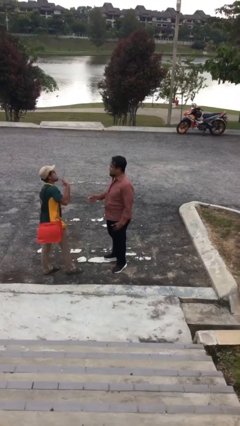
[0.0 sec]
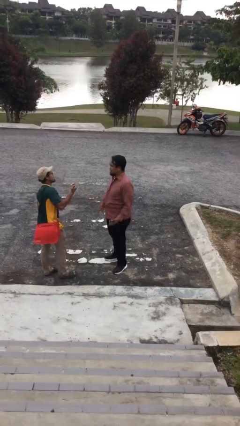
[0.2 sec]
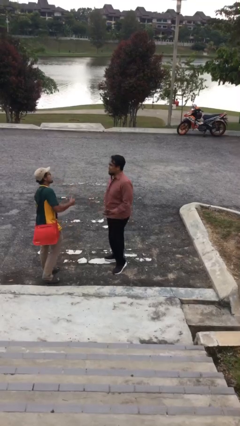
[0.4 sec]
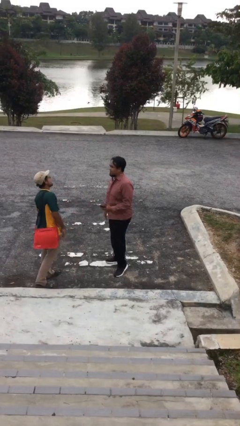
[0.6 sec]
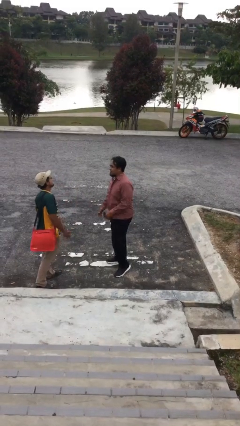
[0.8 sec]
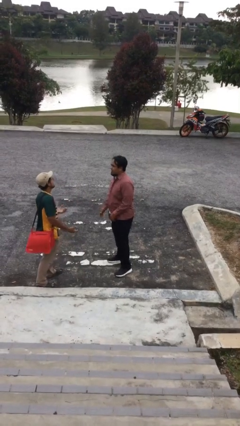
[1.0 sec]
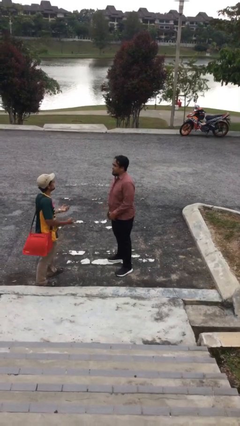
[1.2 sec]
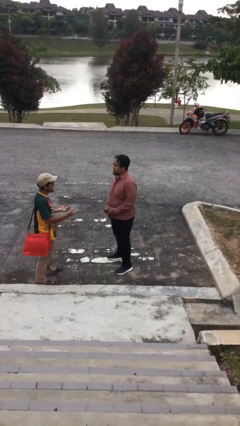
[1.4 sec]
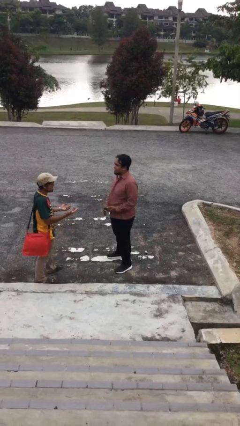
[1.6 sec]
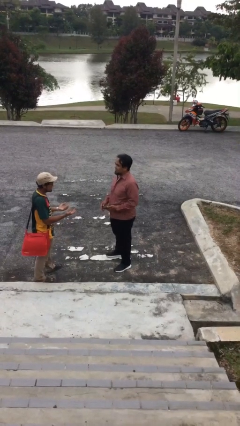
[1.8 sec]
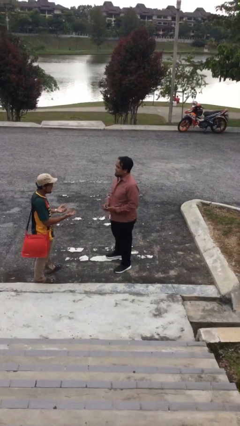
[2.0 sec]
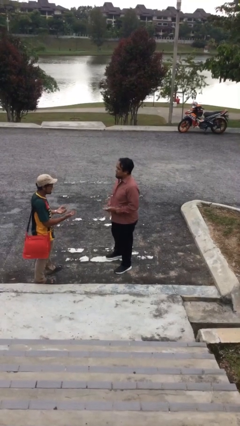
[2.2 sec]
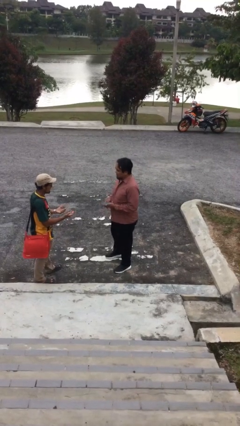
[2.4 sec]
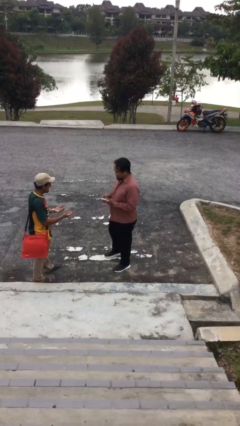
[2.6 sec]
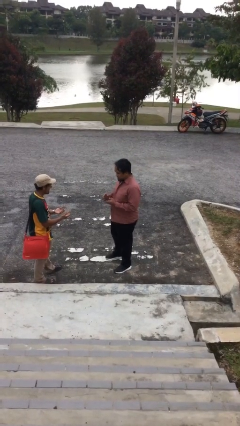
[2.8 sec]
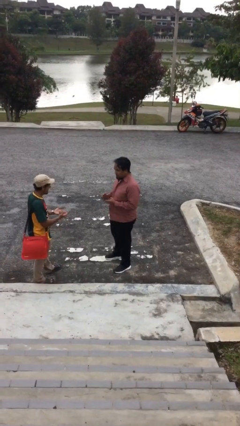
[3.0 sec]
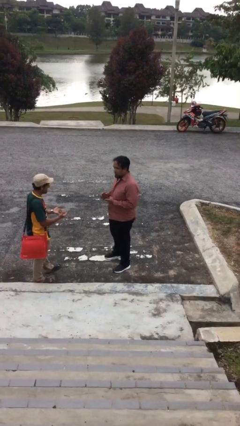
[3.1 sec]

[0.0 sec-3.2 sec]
person talks to person

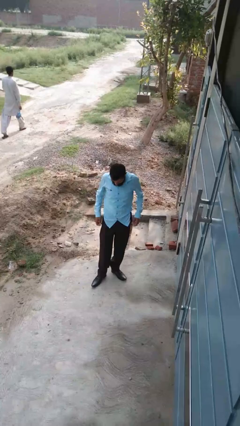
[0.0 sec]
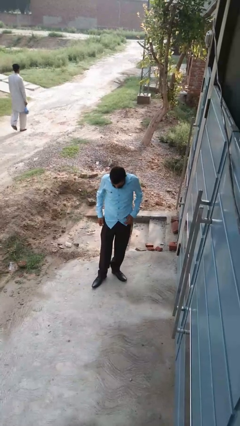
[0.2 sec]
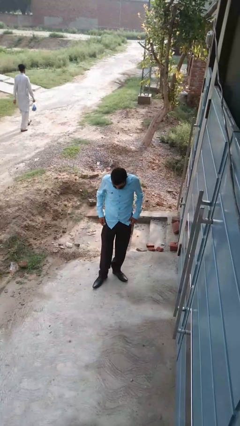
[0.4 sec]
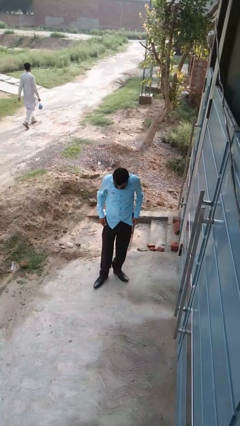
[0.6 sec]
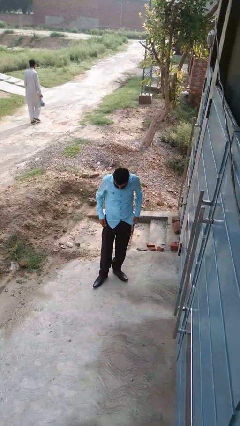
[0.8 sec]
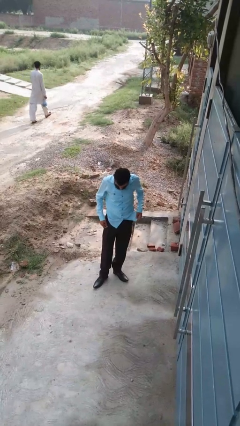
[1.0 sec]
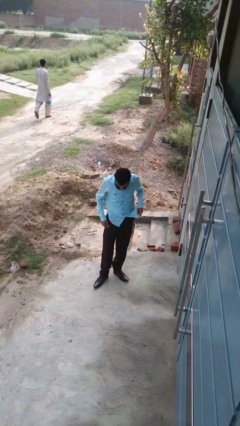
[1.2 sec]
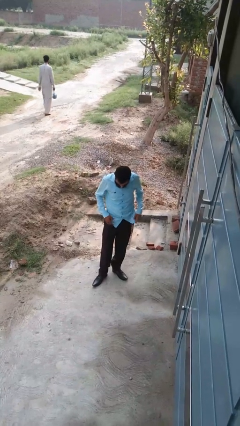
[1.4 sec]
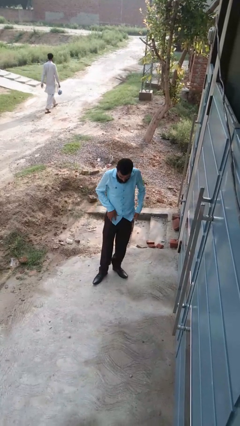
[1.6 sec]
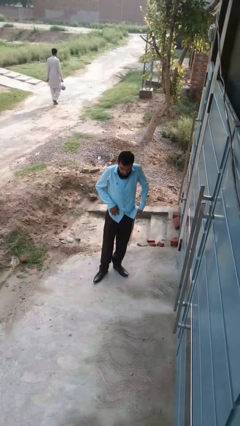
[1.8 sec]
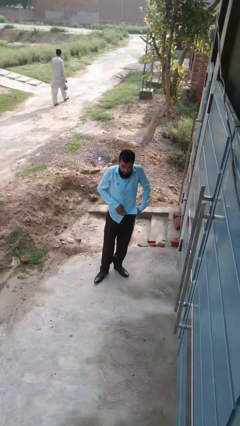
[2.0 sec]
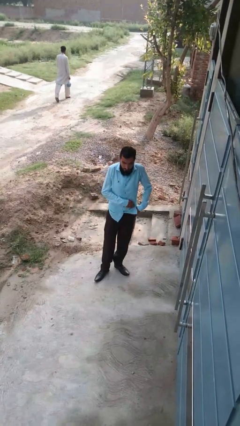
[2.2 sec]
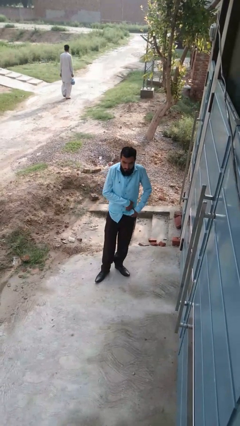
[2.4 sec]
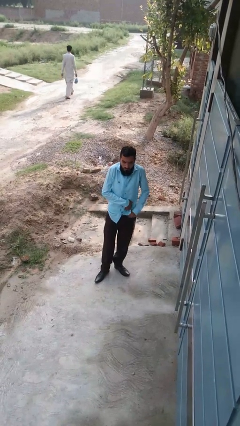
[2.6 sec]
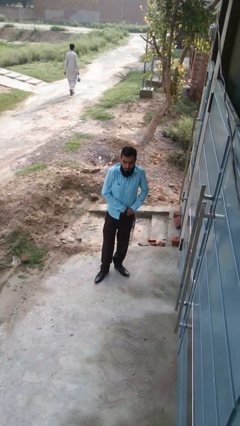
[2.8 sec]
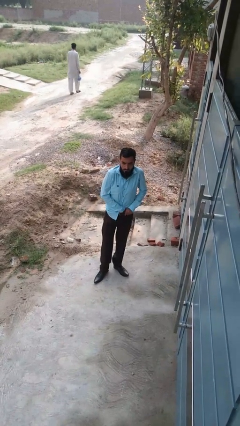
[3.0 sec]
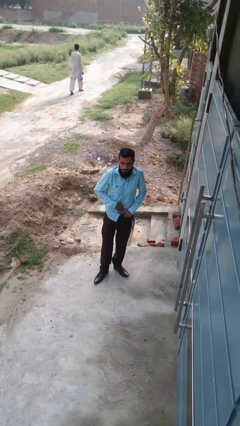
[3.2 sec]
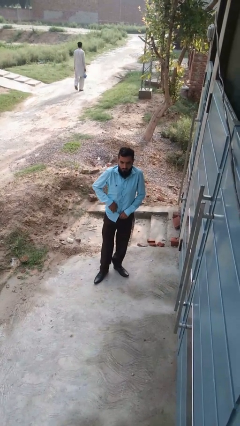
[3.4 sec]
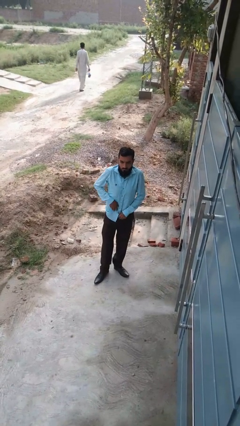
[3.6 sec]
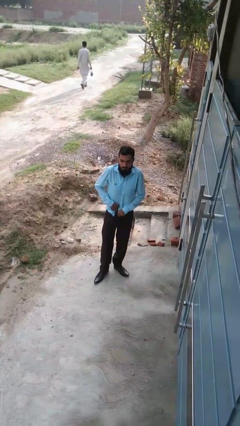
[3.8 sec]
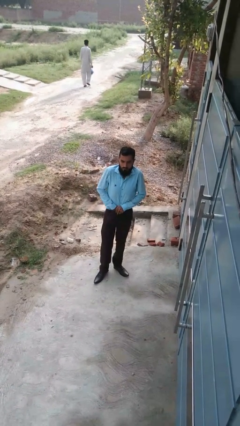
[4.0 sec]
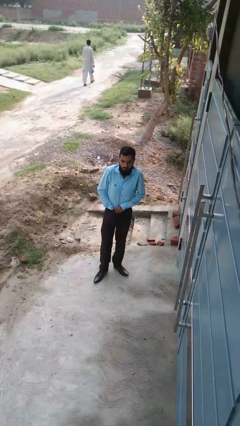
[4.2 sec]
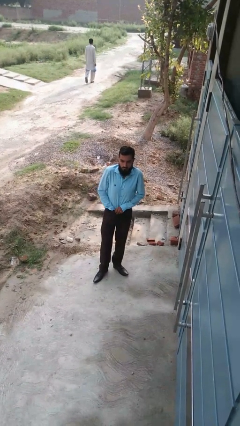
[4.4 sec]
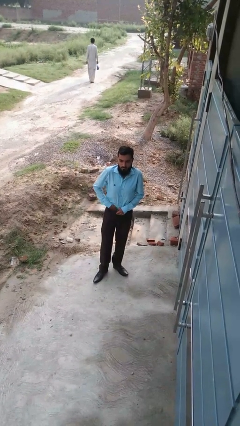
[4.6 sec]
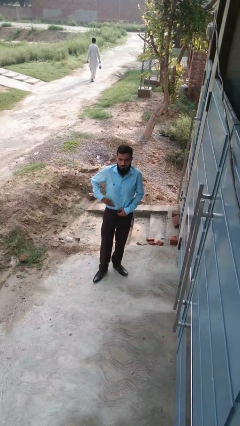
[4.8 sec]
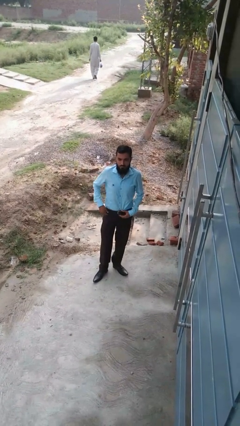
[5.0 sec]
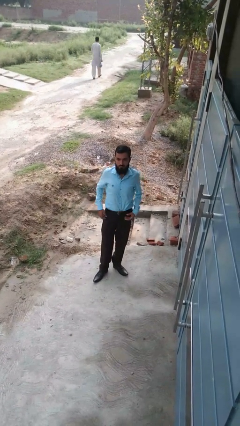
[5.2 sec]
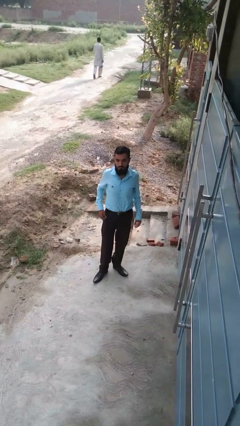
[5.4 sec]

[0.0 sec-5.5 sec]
person tucks in shirt

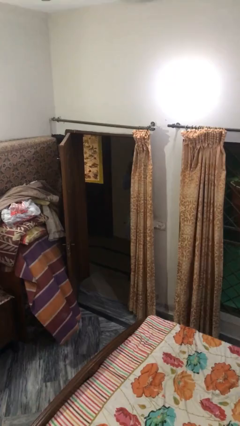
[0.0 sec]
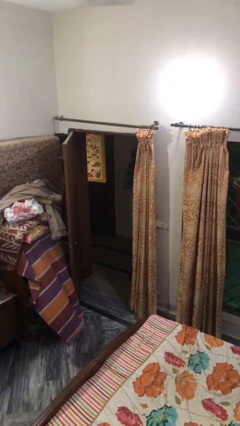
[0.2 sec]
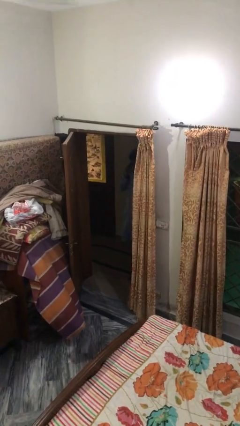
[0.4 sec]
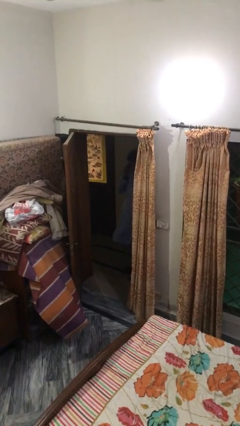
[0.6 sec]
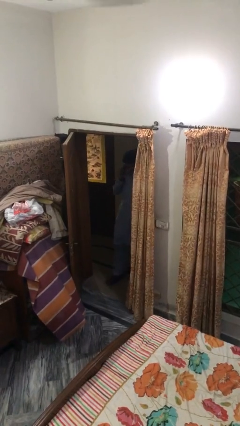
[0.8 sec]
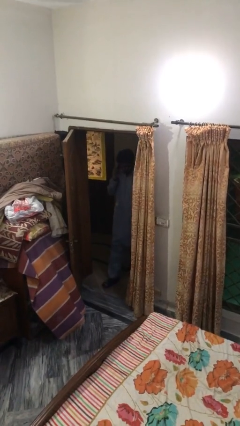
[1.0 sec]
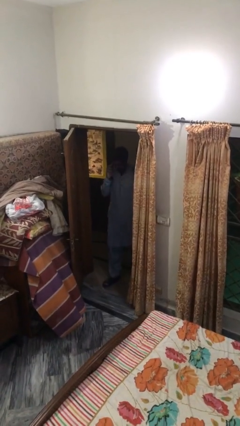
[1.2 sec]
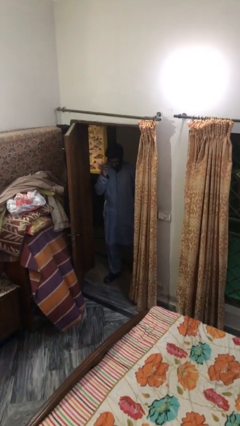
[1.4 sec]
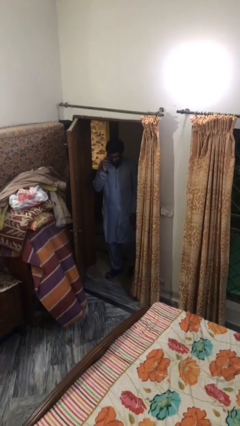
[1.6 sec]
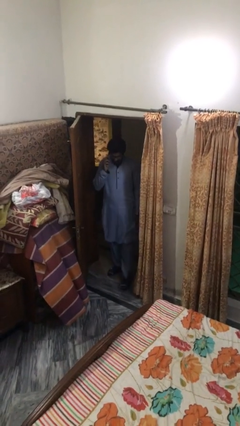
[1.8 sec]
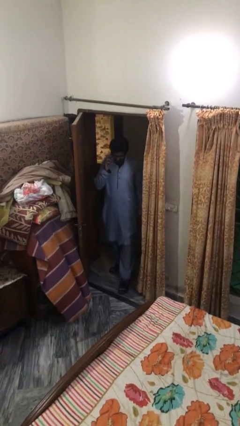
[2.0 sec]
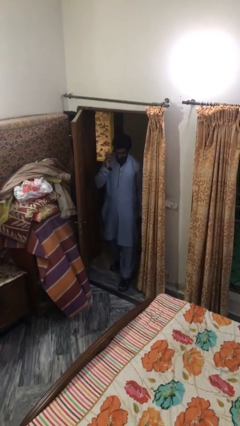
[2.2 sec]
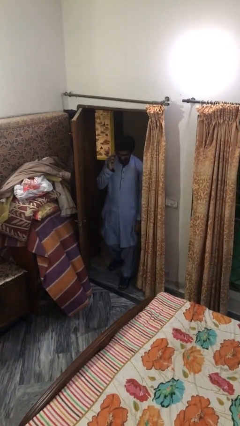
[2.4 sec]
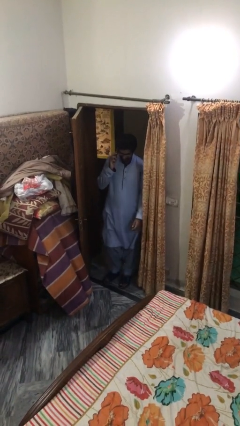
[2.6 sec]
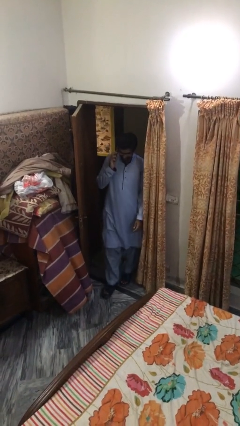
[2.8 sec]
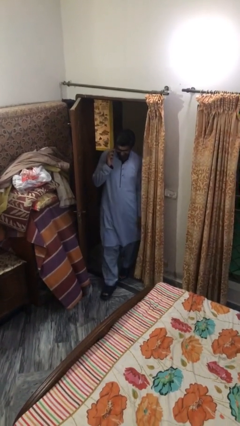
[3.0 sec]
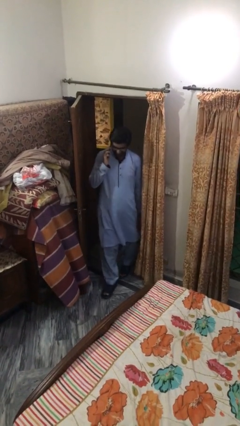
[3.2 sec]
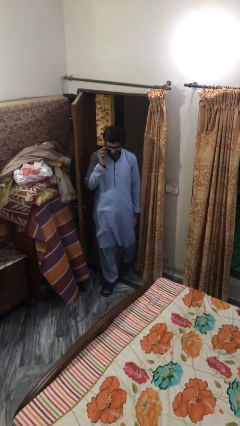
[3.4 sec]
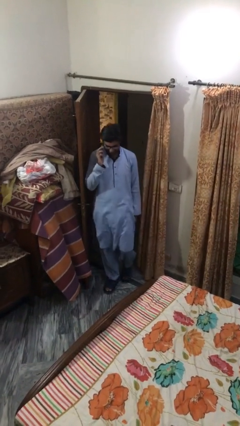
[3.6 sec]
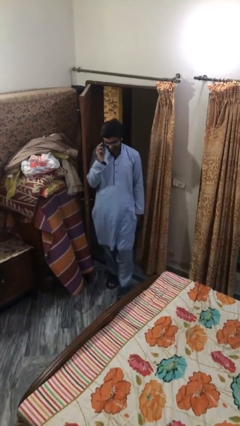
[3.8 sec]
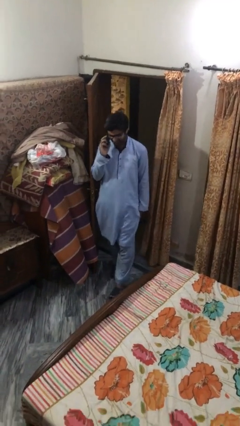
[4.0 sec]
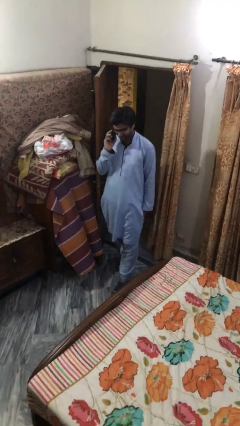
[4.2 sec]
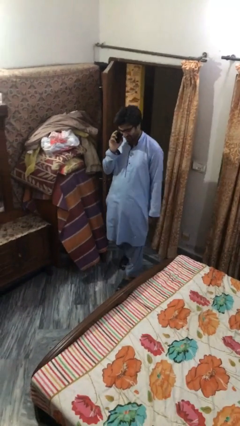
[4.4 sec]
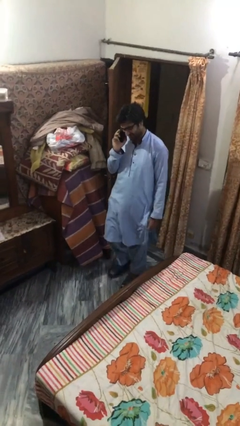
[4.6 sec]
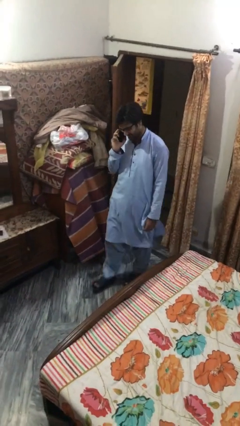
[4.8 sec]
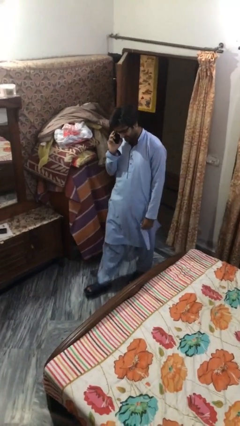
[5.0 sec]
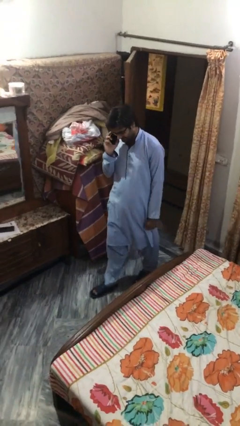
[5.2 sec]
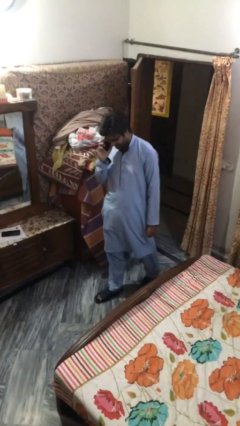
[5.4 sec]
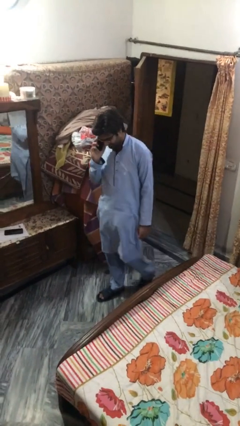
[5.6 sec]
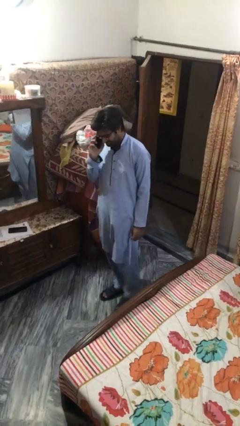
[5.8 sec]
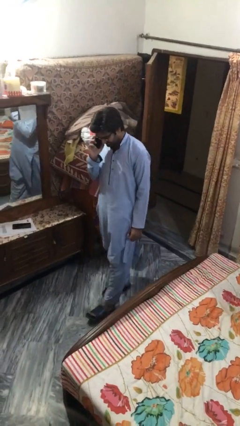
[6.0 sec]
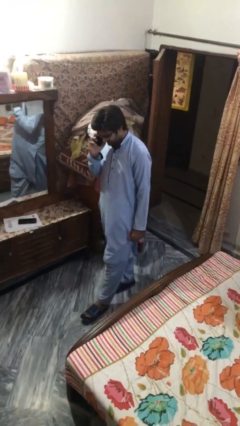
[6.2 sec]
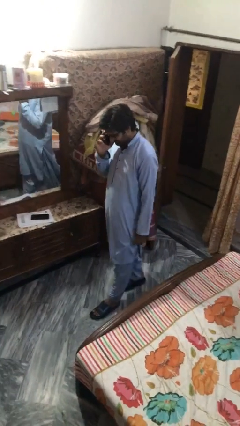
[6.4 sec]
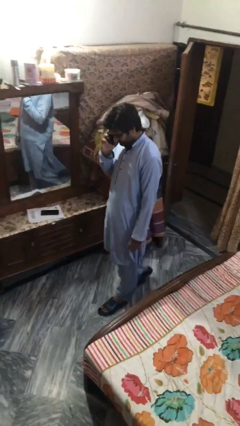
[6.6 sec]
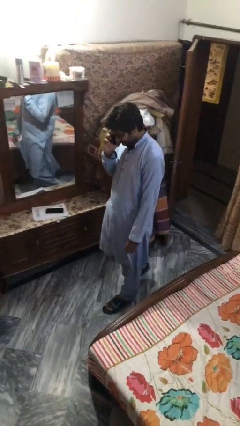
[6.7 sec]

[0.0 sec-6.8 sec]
person enters scene through structure

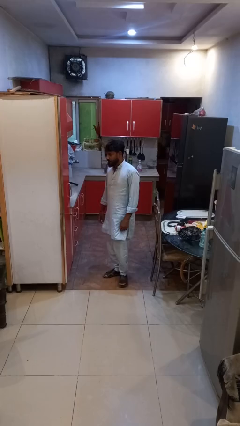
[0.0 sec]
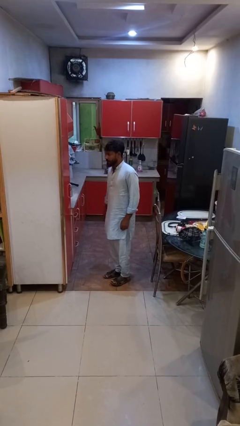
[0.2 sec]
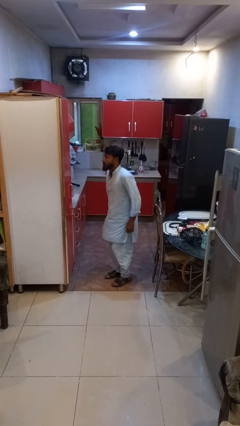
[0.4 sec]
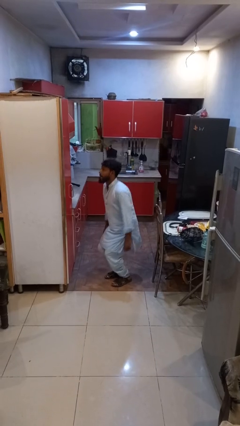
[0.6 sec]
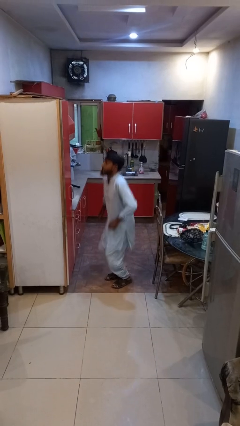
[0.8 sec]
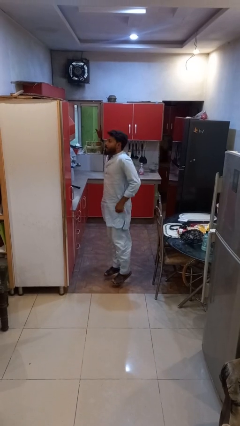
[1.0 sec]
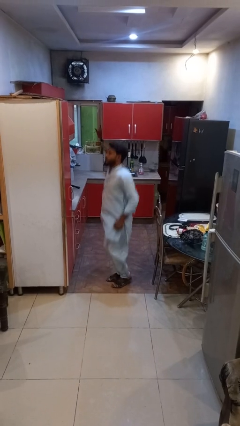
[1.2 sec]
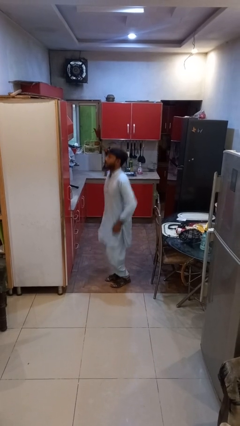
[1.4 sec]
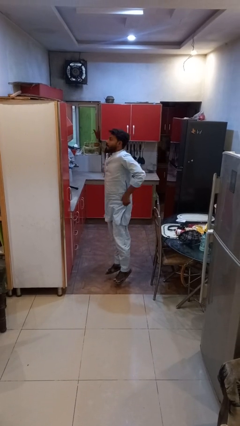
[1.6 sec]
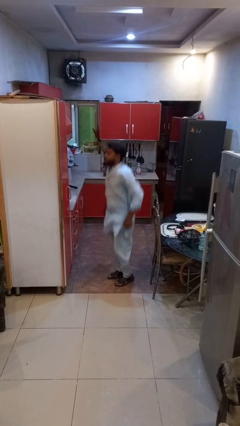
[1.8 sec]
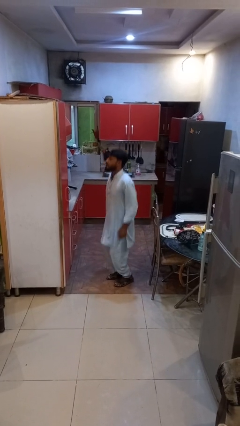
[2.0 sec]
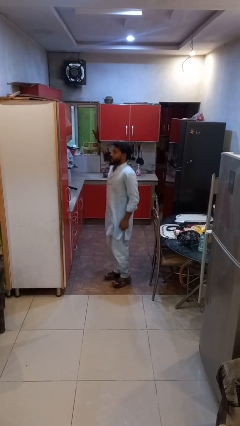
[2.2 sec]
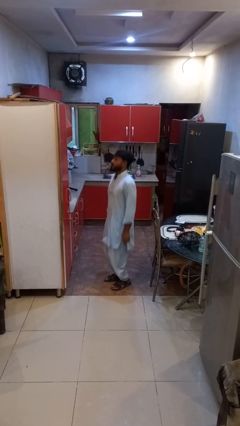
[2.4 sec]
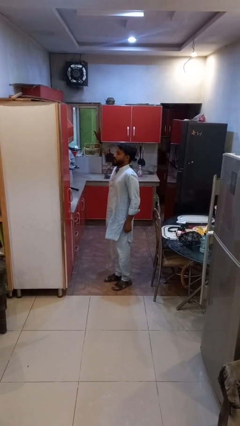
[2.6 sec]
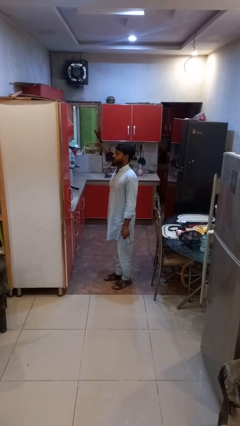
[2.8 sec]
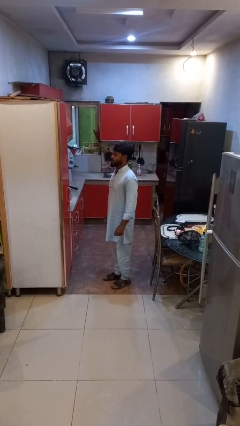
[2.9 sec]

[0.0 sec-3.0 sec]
person jumps
